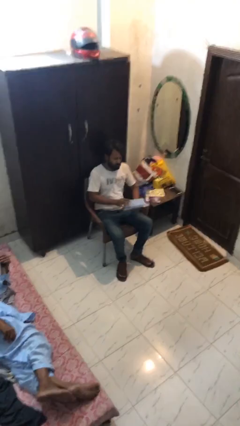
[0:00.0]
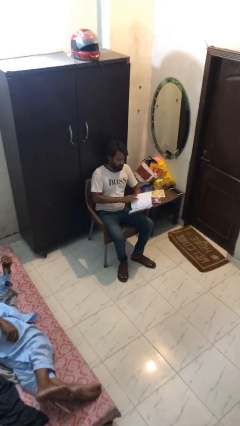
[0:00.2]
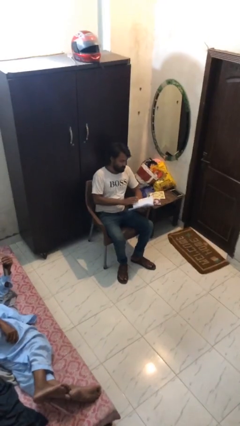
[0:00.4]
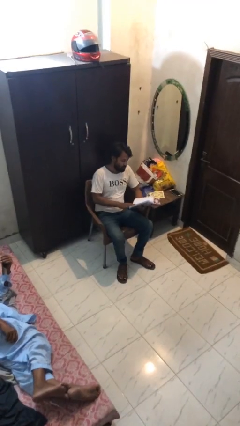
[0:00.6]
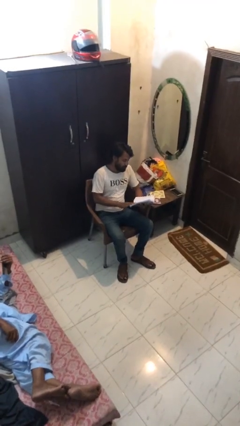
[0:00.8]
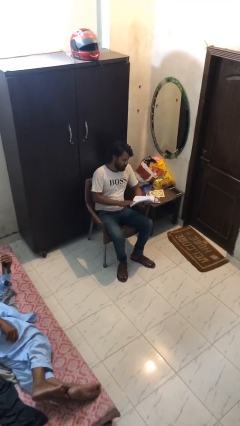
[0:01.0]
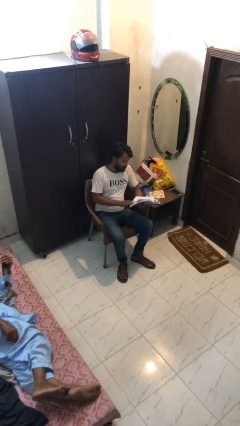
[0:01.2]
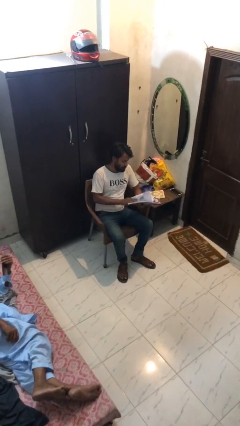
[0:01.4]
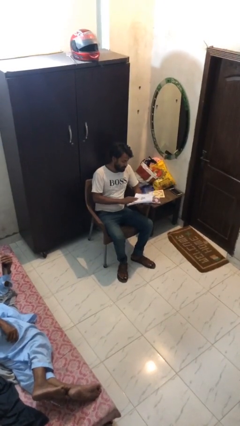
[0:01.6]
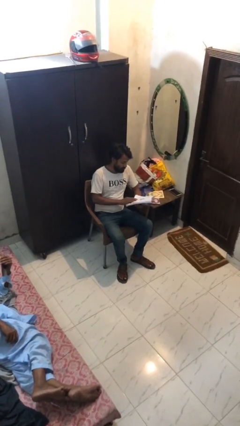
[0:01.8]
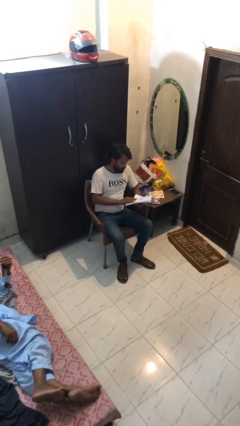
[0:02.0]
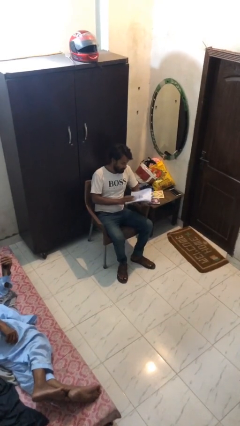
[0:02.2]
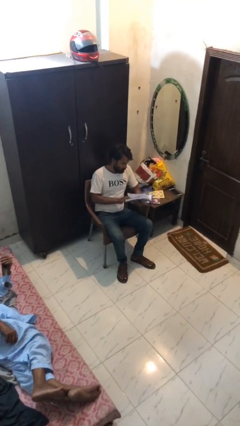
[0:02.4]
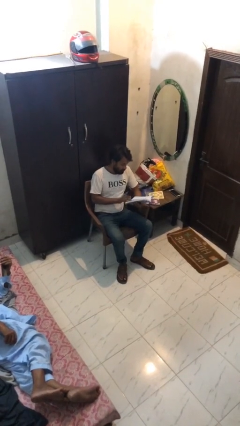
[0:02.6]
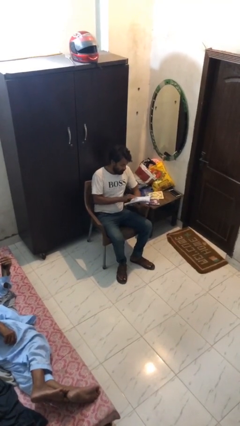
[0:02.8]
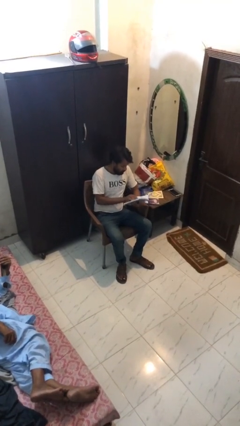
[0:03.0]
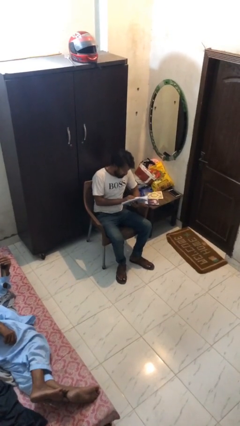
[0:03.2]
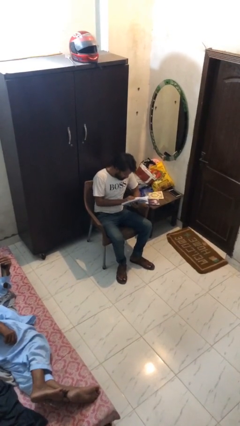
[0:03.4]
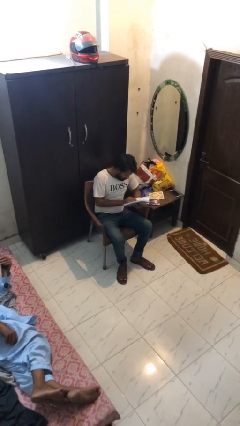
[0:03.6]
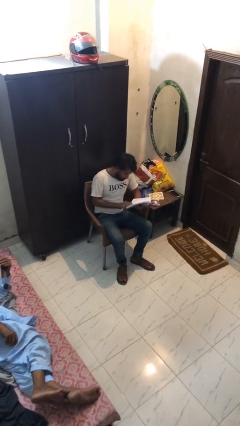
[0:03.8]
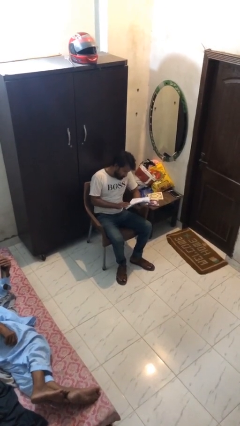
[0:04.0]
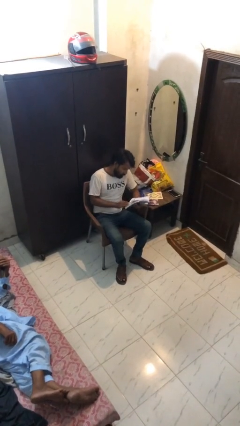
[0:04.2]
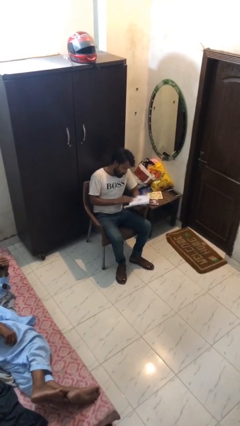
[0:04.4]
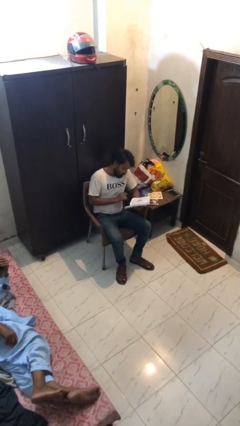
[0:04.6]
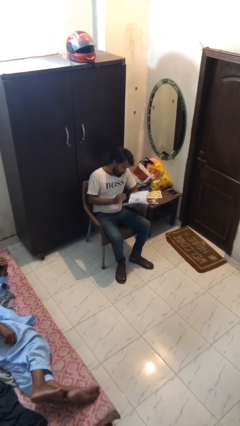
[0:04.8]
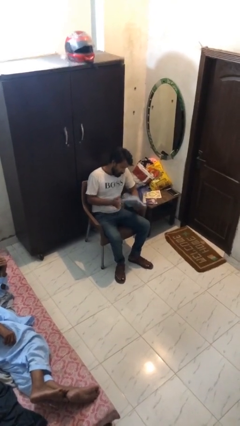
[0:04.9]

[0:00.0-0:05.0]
person reads document

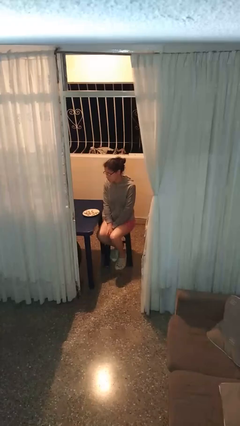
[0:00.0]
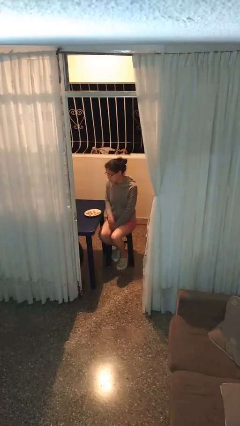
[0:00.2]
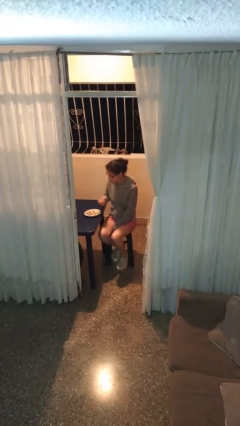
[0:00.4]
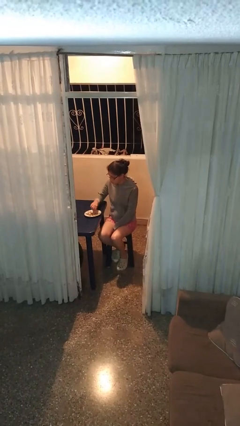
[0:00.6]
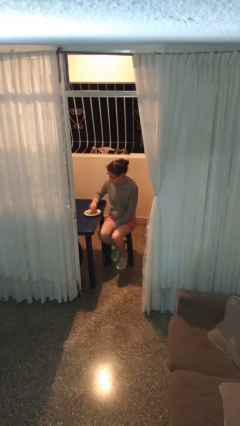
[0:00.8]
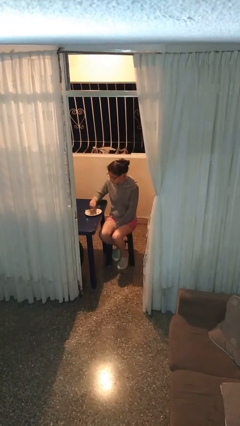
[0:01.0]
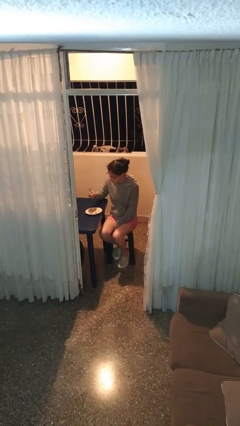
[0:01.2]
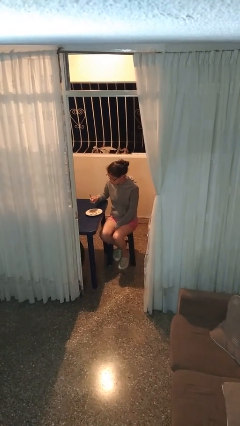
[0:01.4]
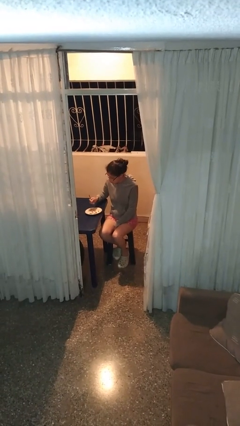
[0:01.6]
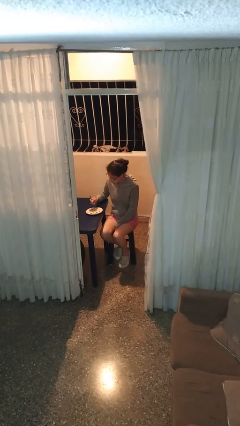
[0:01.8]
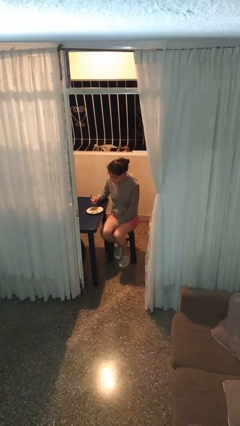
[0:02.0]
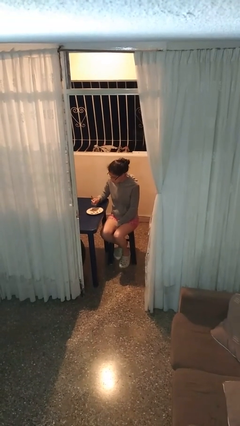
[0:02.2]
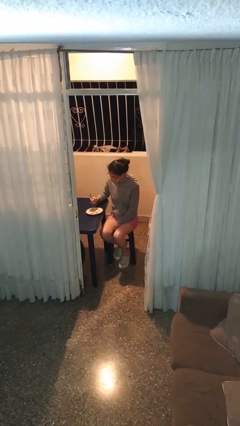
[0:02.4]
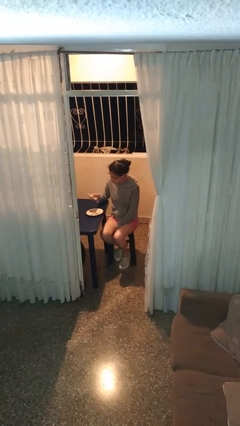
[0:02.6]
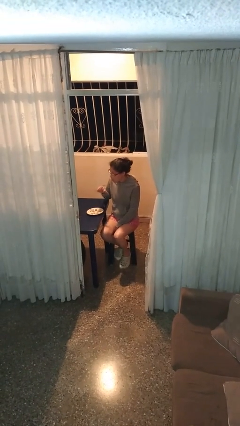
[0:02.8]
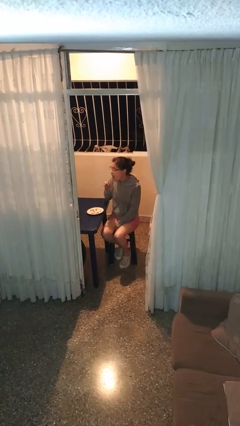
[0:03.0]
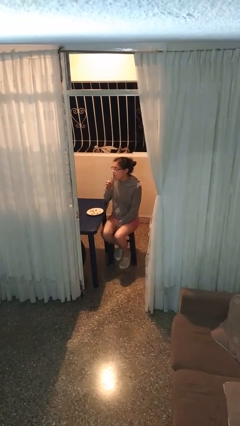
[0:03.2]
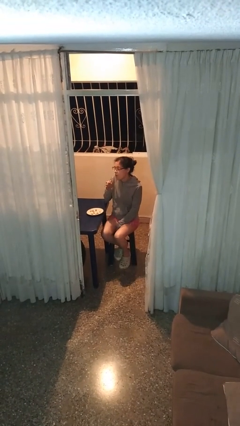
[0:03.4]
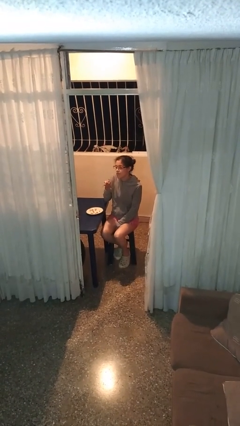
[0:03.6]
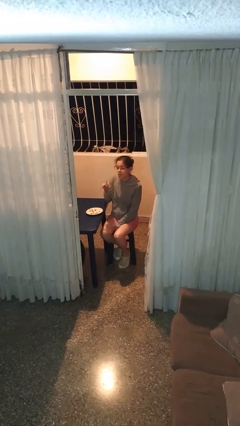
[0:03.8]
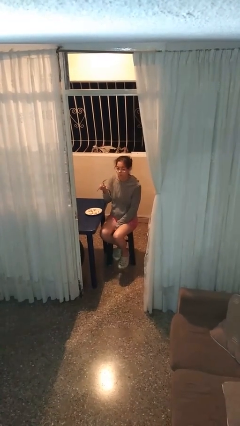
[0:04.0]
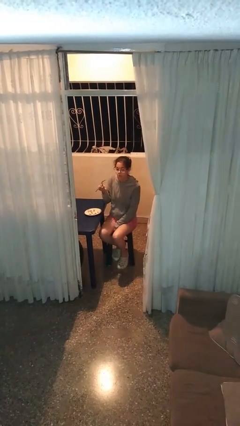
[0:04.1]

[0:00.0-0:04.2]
person eats with utensil
